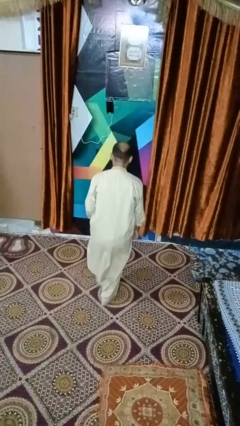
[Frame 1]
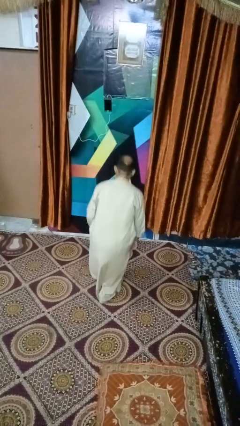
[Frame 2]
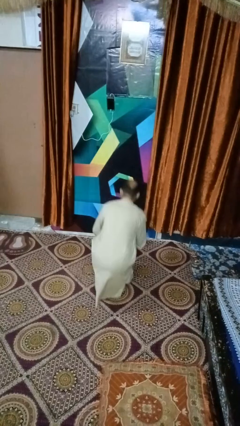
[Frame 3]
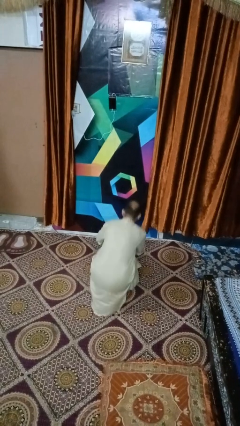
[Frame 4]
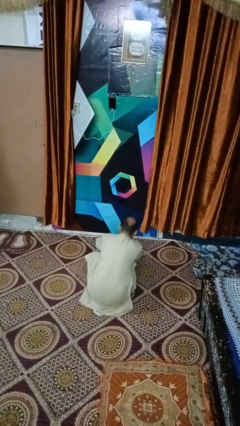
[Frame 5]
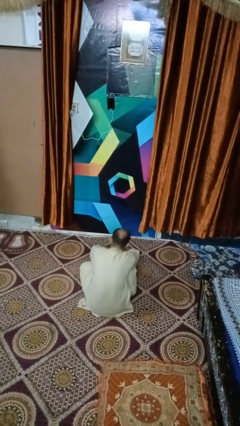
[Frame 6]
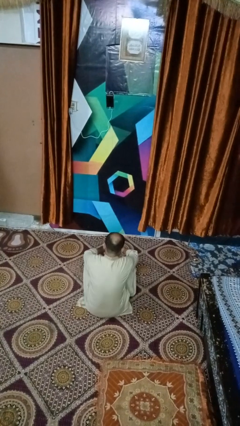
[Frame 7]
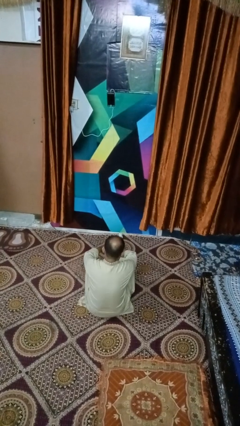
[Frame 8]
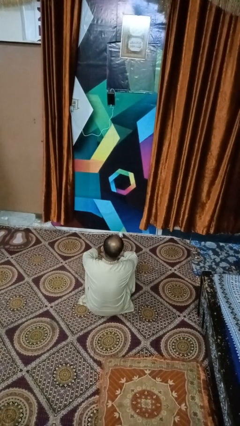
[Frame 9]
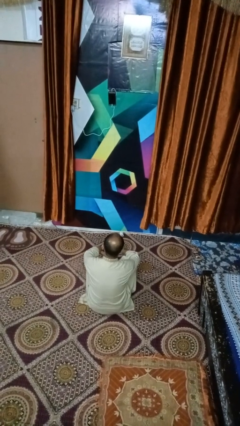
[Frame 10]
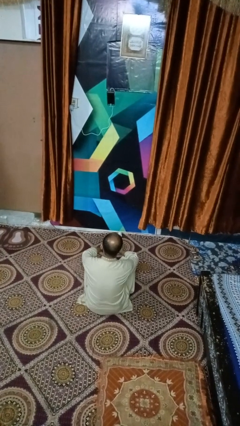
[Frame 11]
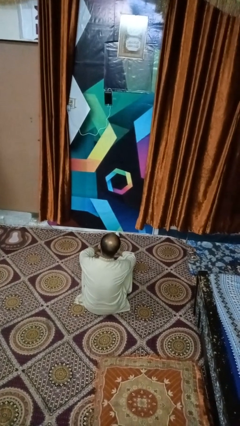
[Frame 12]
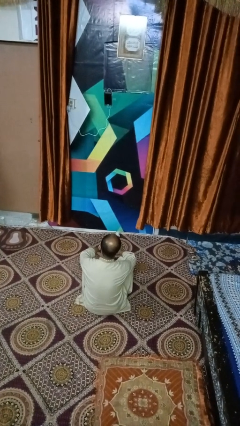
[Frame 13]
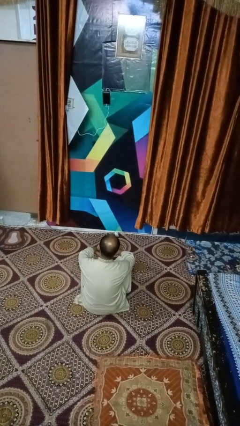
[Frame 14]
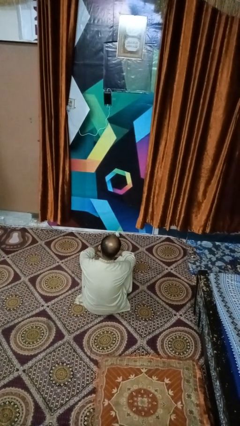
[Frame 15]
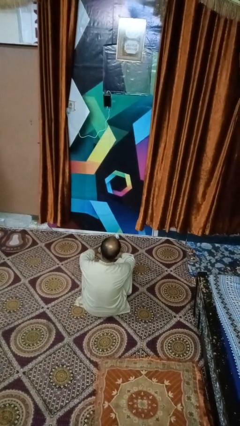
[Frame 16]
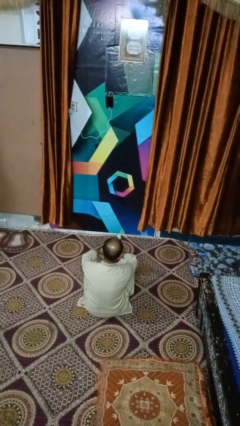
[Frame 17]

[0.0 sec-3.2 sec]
person sits crisscross

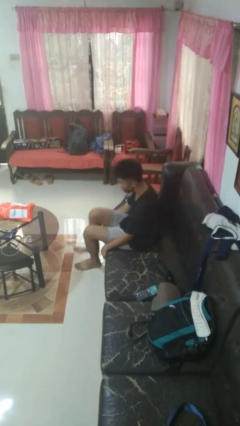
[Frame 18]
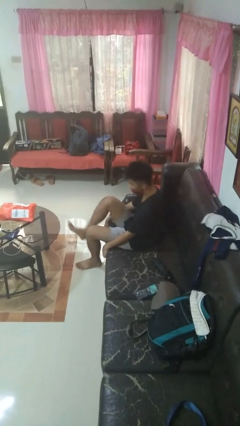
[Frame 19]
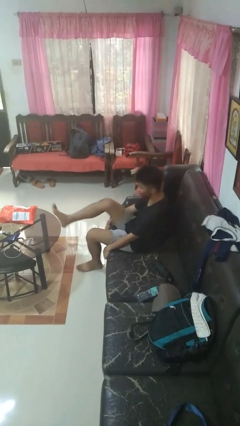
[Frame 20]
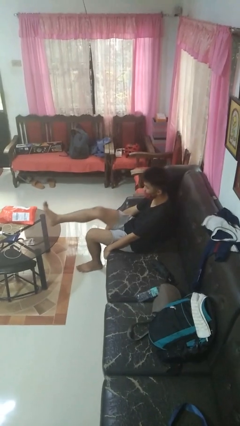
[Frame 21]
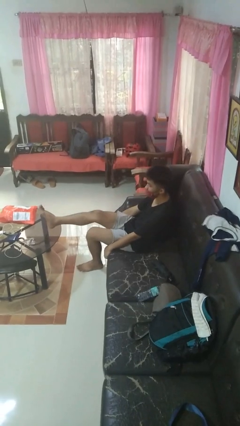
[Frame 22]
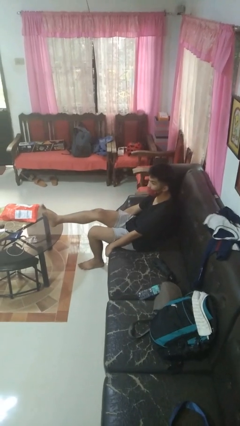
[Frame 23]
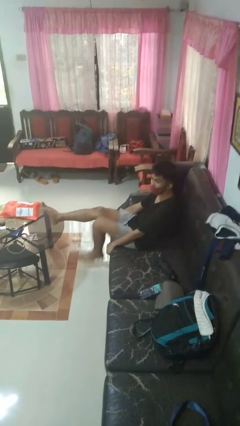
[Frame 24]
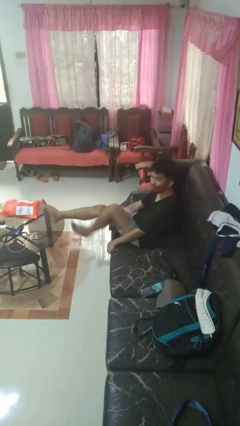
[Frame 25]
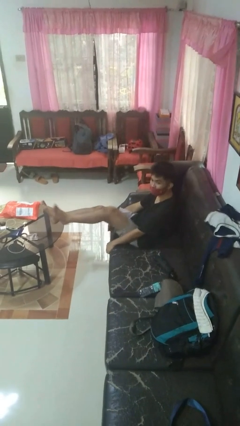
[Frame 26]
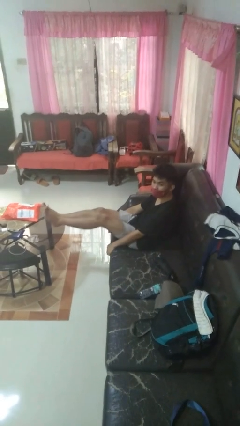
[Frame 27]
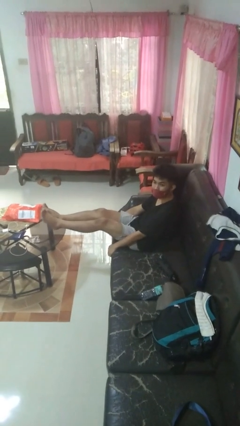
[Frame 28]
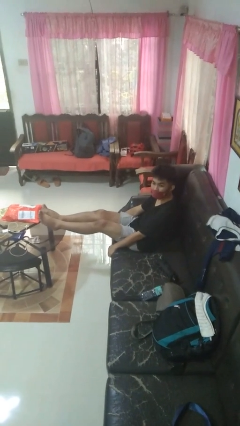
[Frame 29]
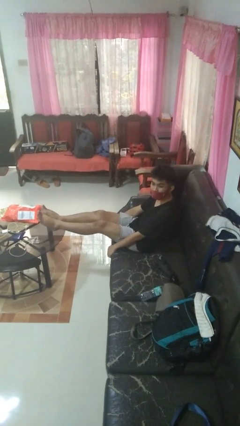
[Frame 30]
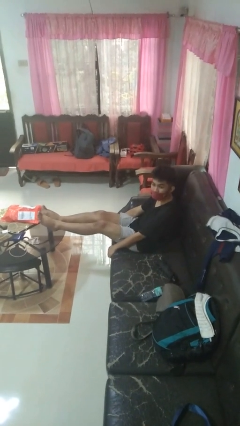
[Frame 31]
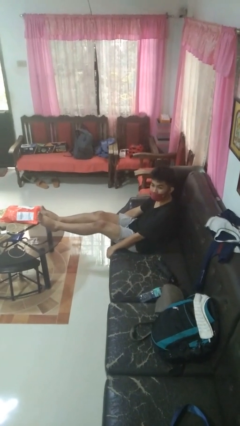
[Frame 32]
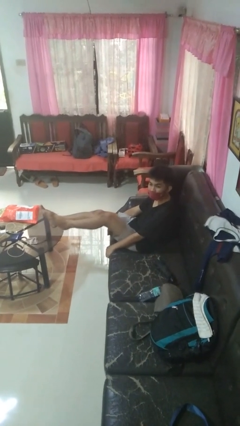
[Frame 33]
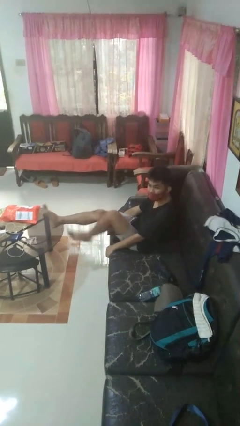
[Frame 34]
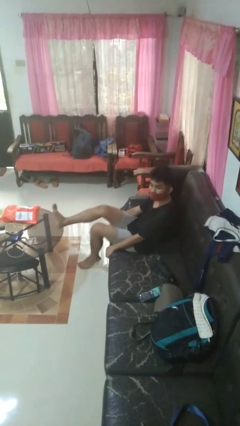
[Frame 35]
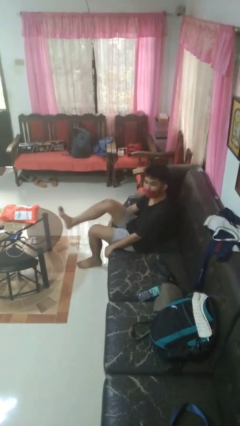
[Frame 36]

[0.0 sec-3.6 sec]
person puts feet up

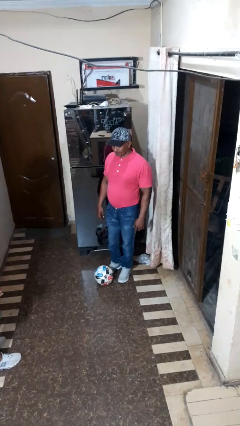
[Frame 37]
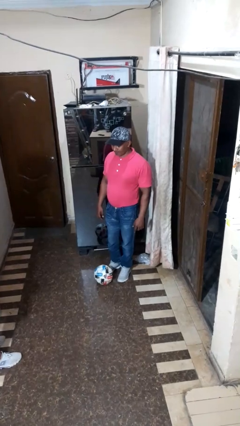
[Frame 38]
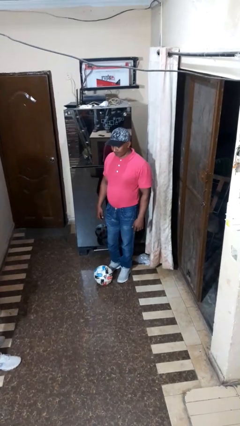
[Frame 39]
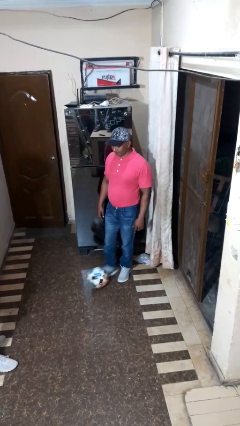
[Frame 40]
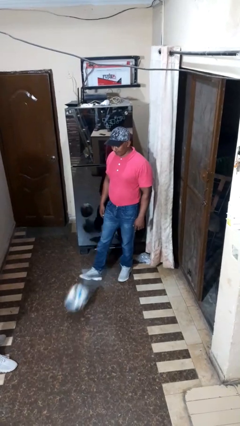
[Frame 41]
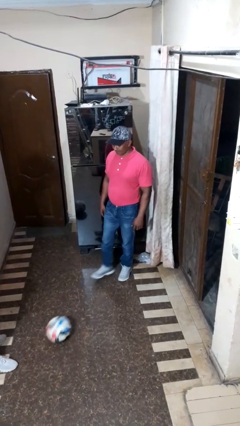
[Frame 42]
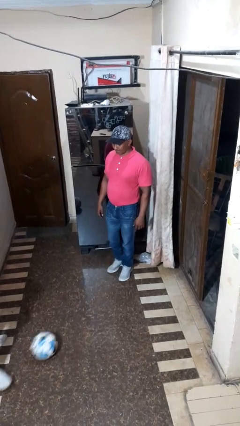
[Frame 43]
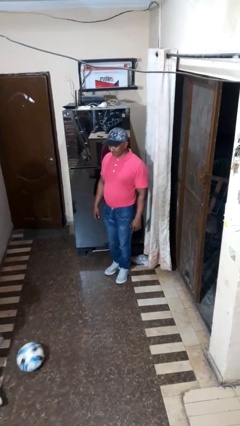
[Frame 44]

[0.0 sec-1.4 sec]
person kicks object to person

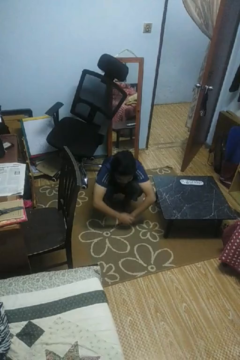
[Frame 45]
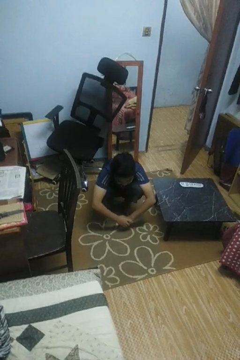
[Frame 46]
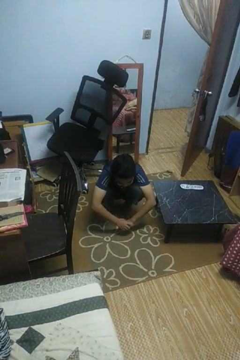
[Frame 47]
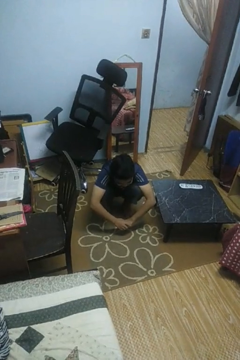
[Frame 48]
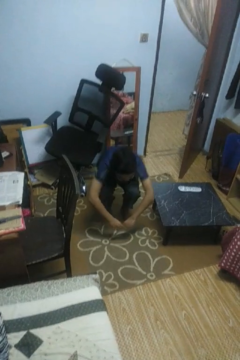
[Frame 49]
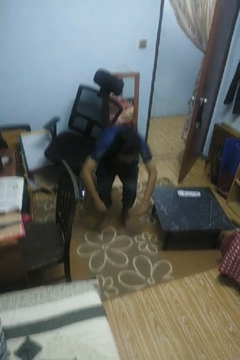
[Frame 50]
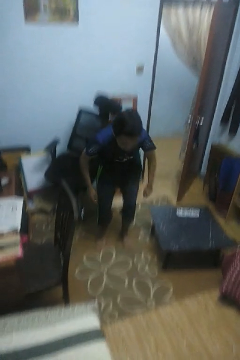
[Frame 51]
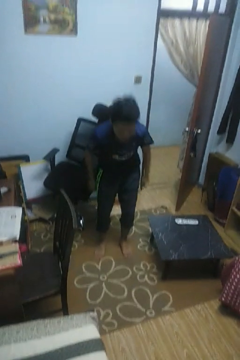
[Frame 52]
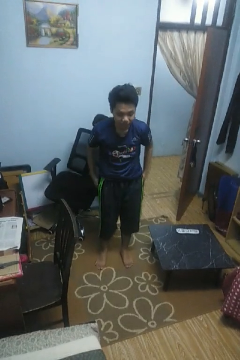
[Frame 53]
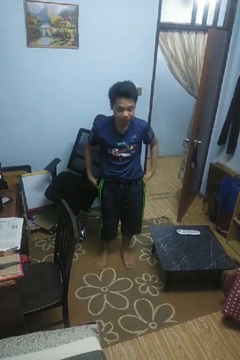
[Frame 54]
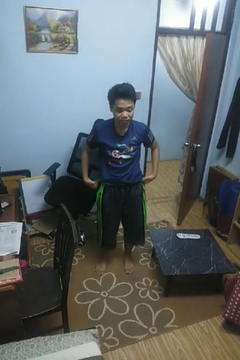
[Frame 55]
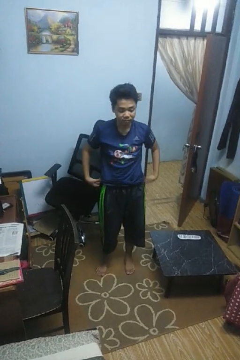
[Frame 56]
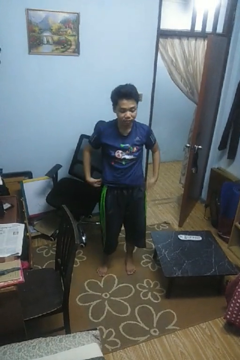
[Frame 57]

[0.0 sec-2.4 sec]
person stands up

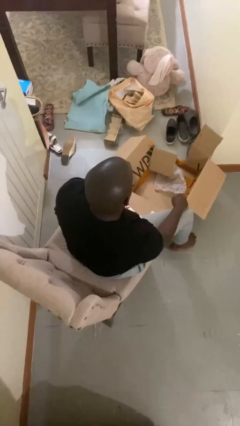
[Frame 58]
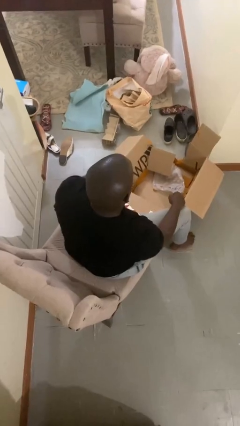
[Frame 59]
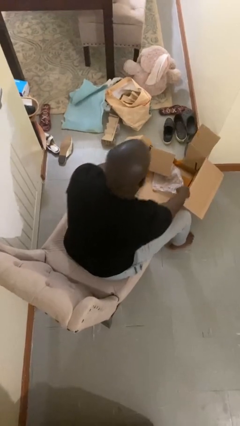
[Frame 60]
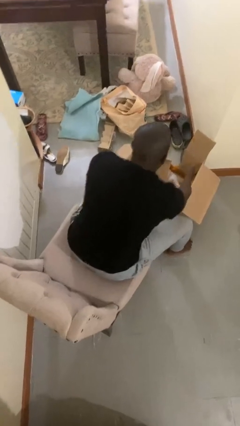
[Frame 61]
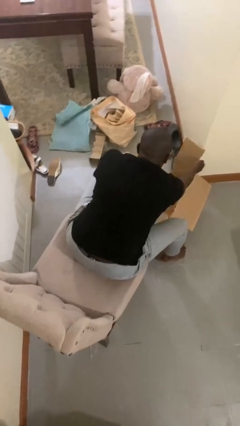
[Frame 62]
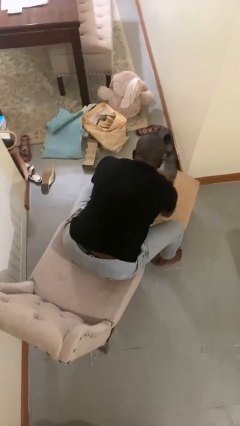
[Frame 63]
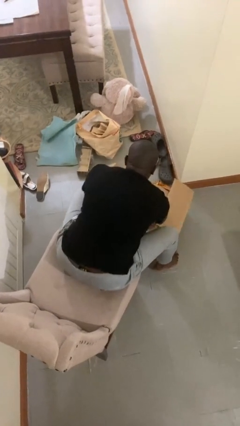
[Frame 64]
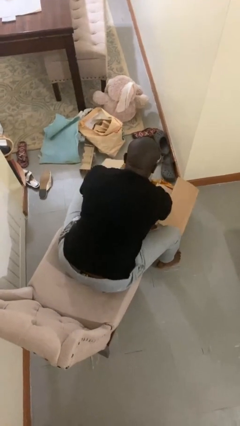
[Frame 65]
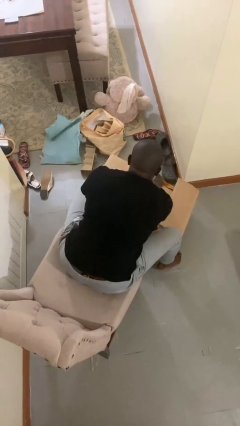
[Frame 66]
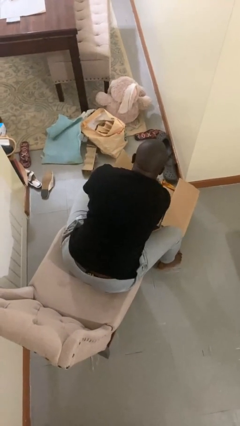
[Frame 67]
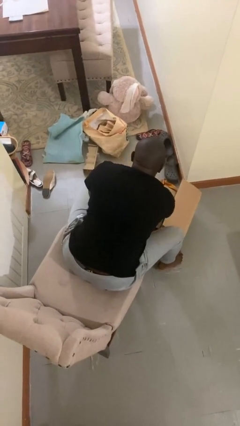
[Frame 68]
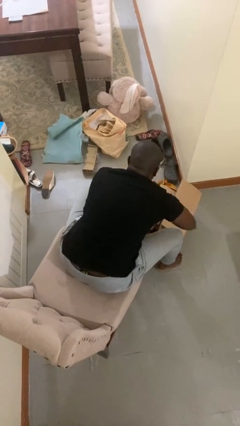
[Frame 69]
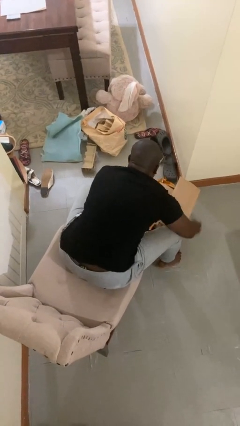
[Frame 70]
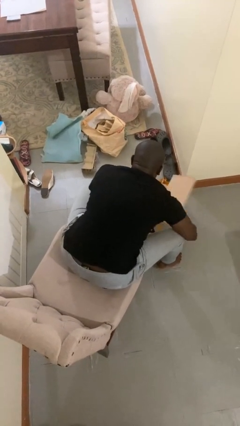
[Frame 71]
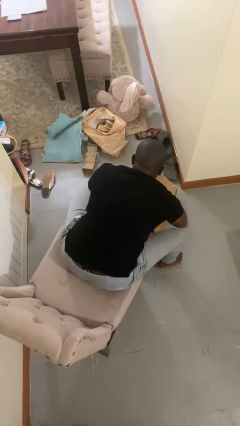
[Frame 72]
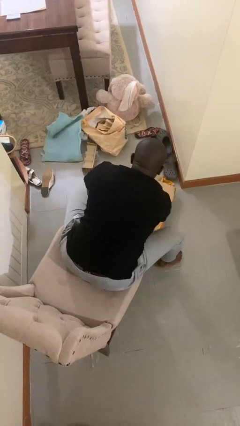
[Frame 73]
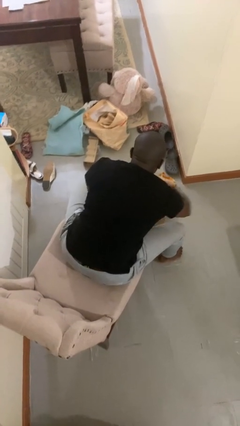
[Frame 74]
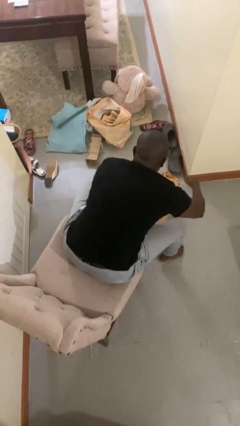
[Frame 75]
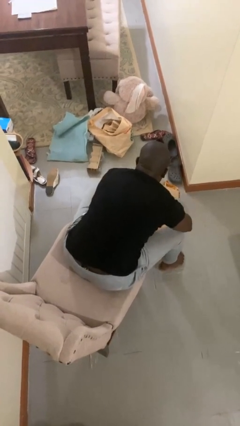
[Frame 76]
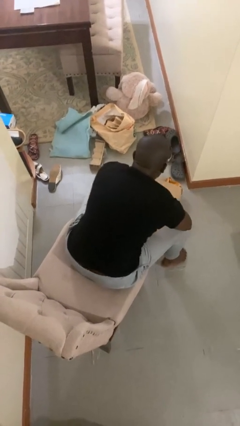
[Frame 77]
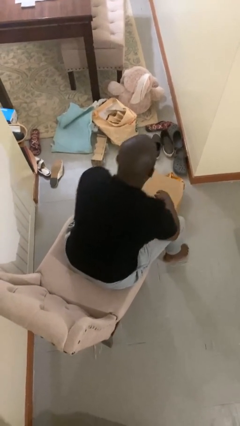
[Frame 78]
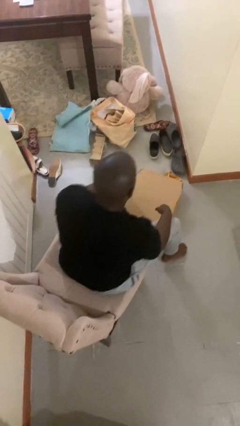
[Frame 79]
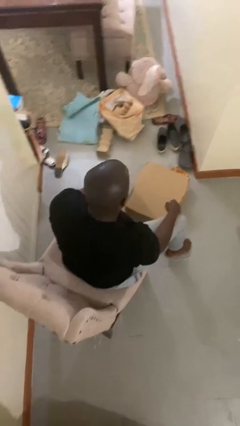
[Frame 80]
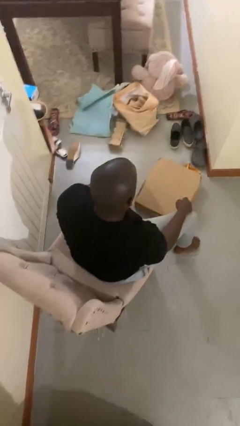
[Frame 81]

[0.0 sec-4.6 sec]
person closes box

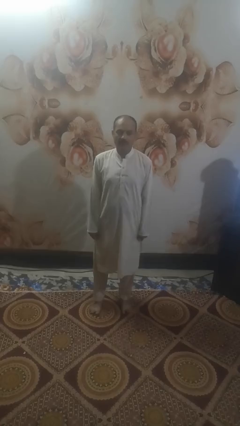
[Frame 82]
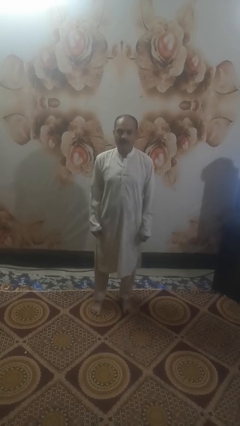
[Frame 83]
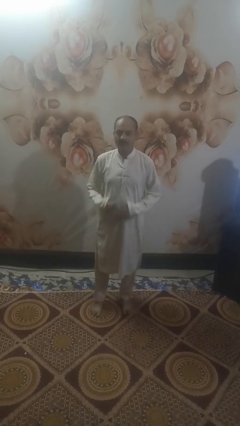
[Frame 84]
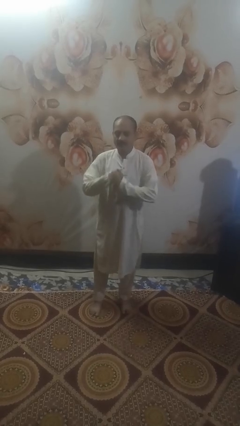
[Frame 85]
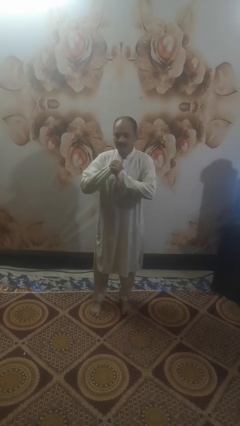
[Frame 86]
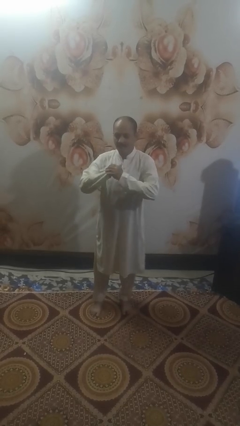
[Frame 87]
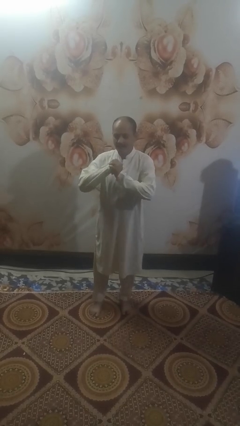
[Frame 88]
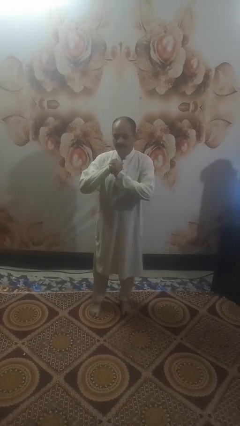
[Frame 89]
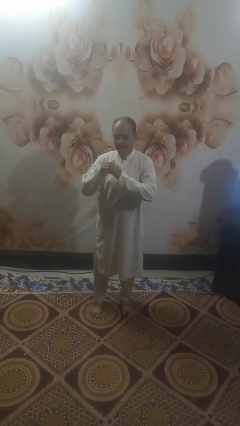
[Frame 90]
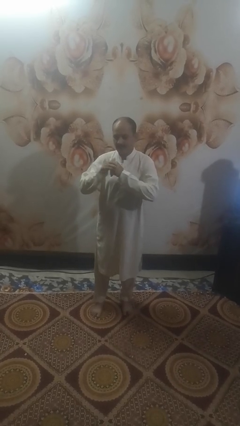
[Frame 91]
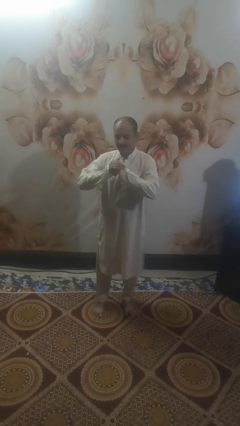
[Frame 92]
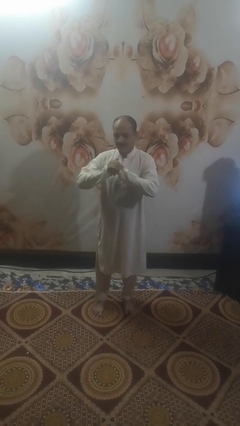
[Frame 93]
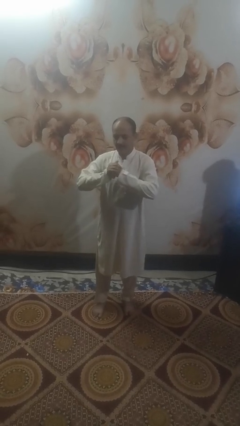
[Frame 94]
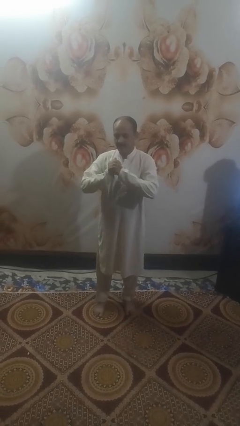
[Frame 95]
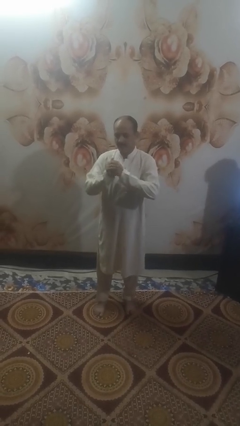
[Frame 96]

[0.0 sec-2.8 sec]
person cracks knuckles
